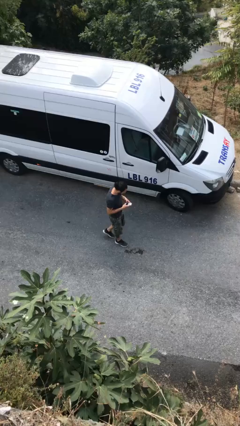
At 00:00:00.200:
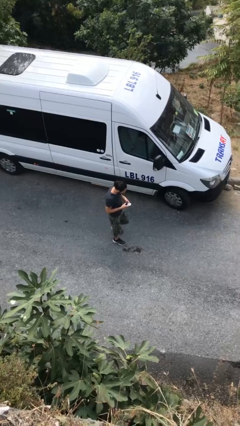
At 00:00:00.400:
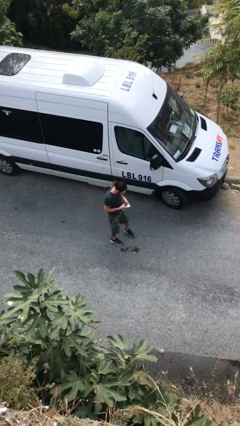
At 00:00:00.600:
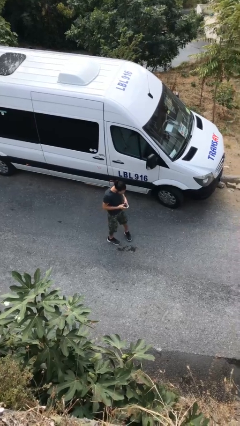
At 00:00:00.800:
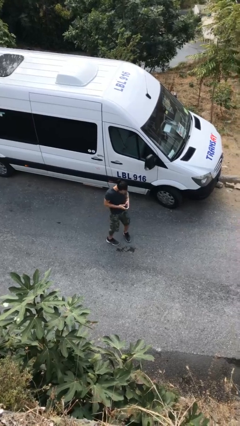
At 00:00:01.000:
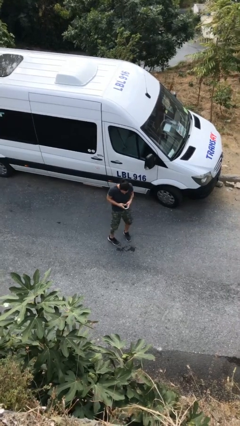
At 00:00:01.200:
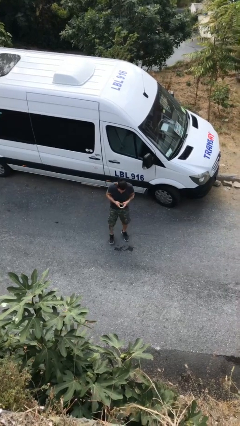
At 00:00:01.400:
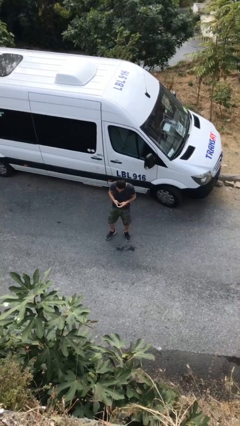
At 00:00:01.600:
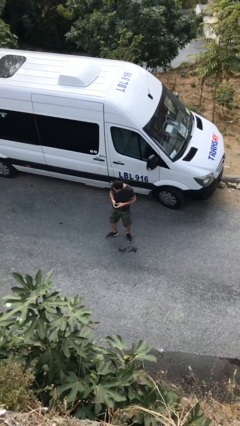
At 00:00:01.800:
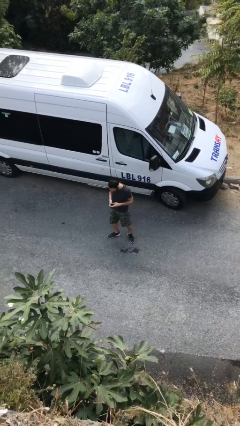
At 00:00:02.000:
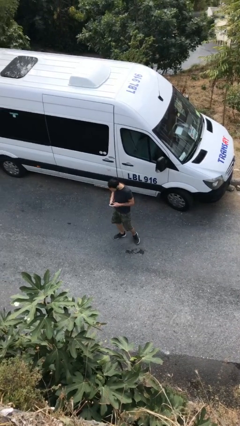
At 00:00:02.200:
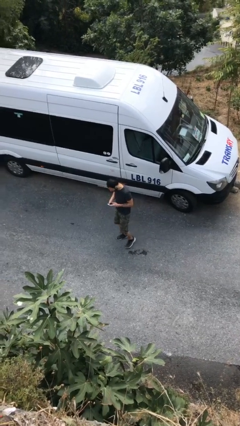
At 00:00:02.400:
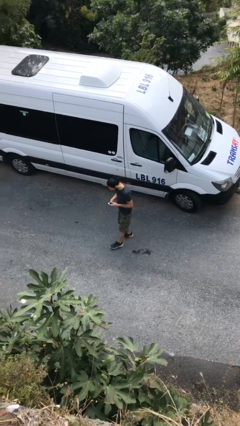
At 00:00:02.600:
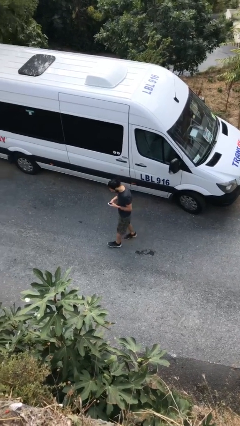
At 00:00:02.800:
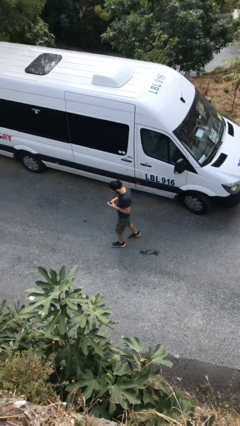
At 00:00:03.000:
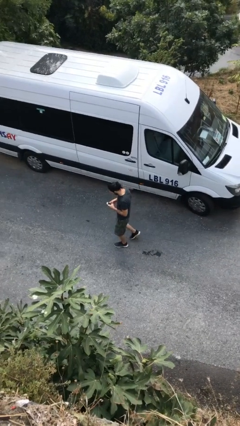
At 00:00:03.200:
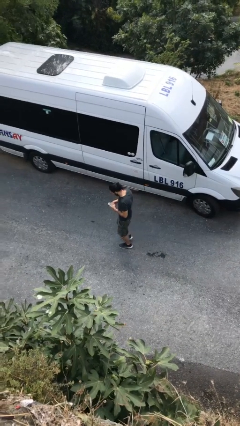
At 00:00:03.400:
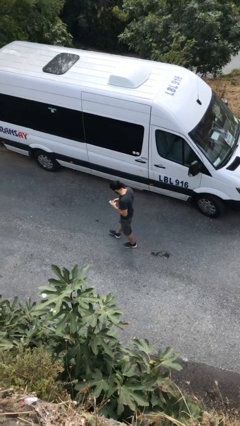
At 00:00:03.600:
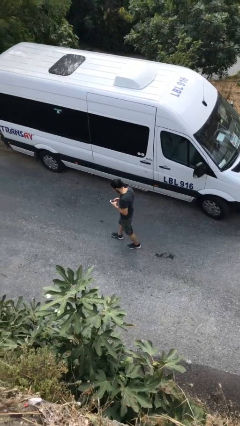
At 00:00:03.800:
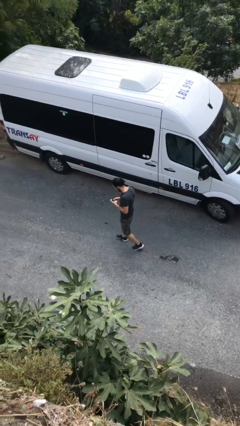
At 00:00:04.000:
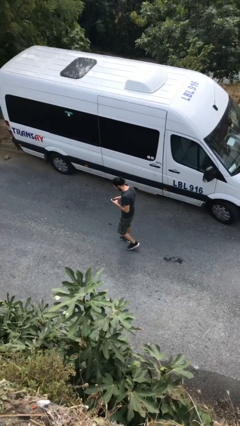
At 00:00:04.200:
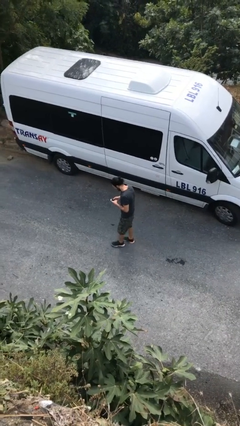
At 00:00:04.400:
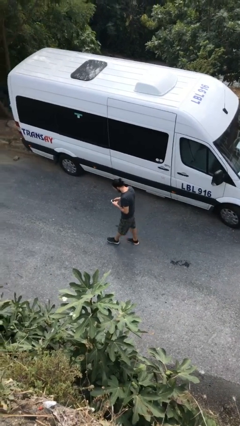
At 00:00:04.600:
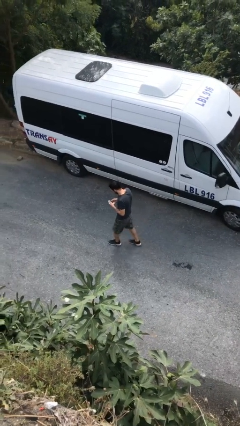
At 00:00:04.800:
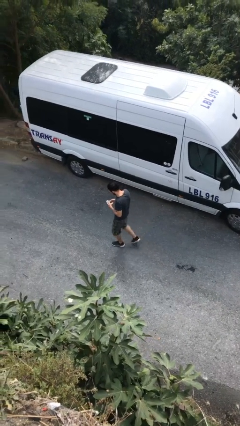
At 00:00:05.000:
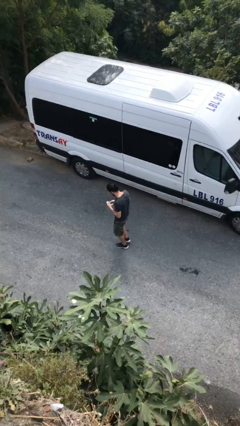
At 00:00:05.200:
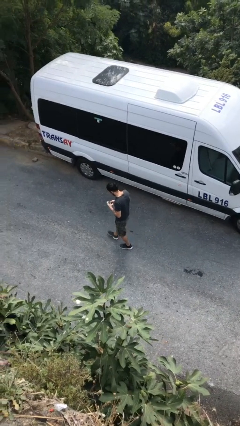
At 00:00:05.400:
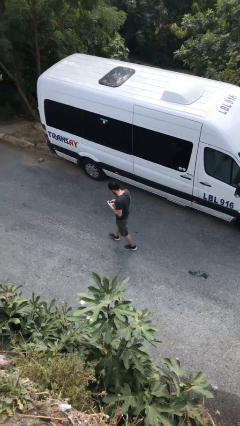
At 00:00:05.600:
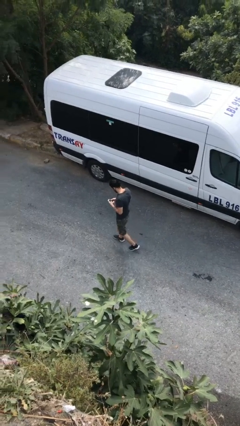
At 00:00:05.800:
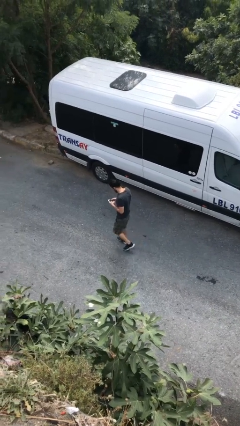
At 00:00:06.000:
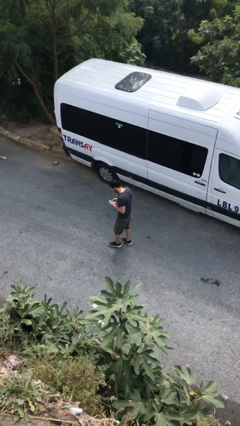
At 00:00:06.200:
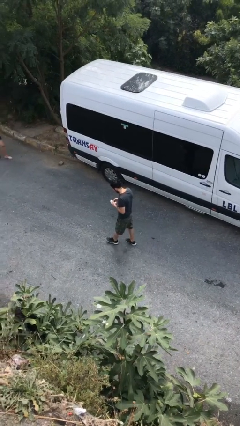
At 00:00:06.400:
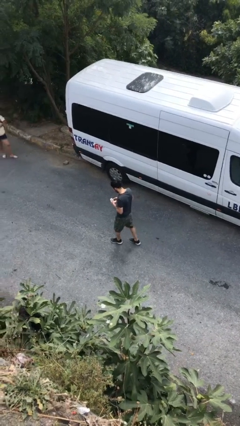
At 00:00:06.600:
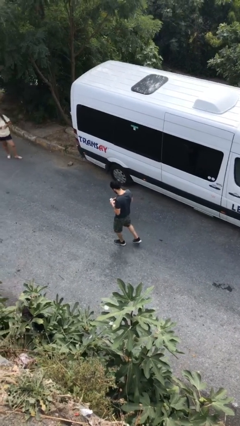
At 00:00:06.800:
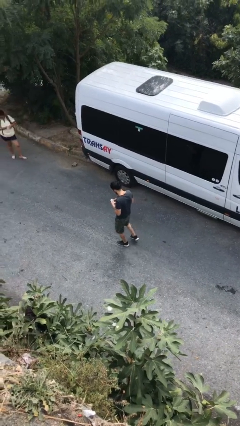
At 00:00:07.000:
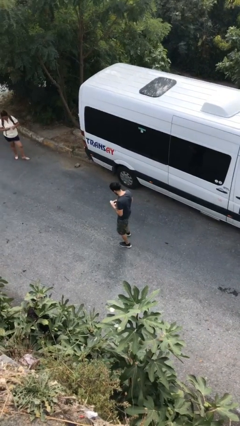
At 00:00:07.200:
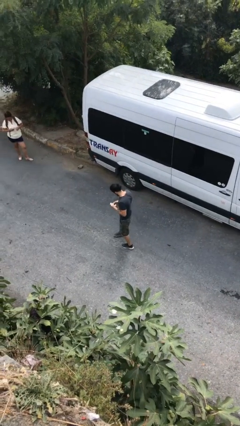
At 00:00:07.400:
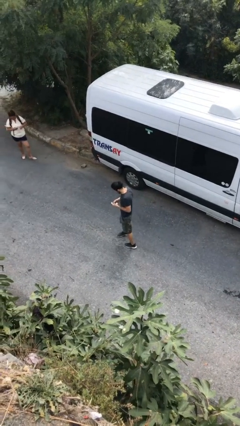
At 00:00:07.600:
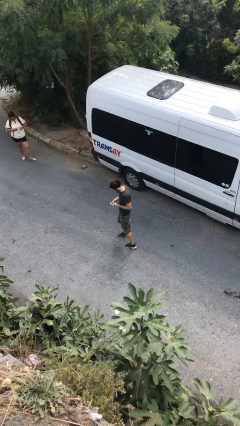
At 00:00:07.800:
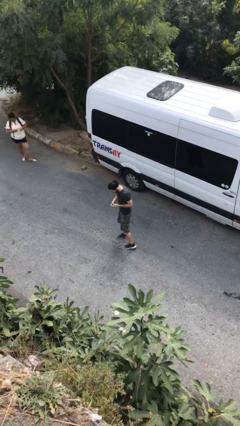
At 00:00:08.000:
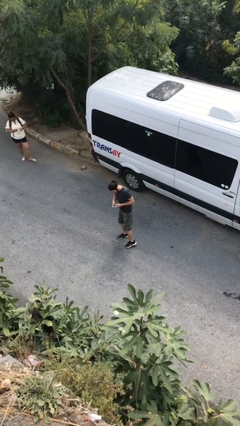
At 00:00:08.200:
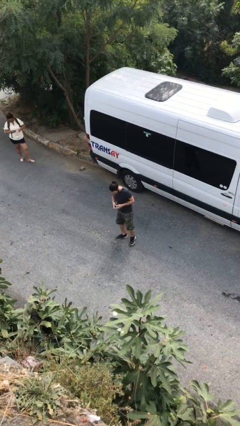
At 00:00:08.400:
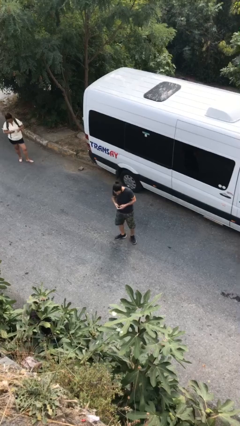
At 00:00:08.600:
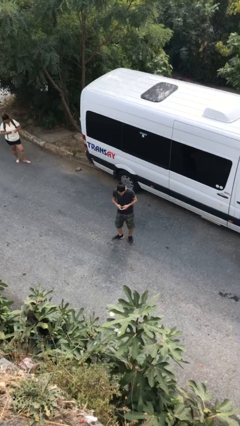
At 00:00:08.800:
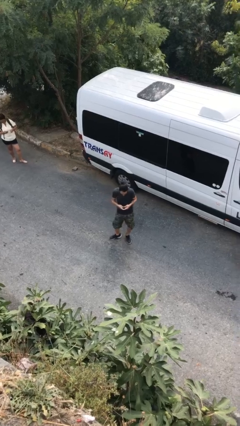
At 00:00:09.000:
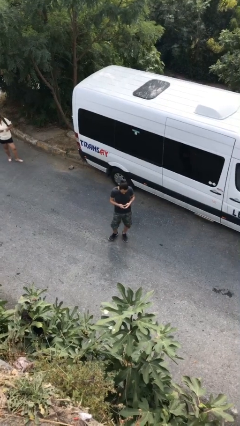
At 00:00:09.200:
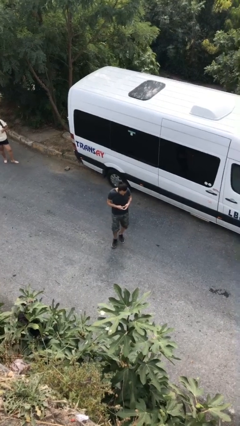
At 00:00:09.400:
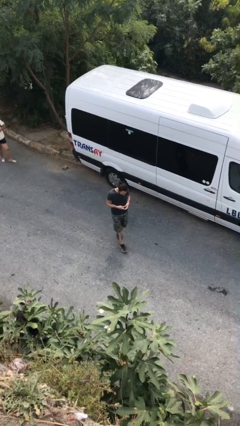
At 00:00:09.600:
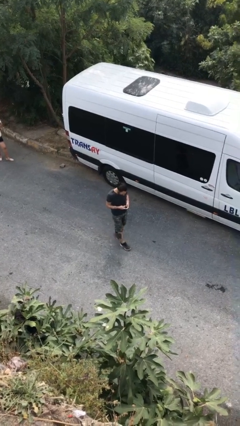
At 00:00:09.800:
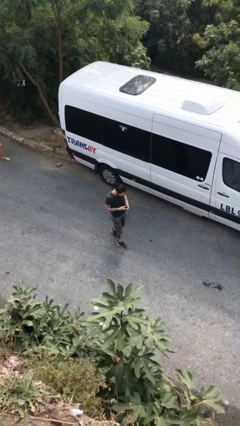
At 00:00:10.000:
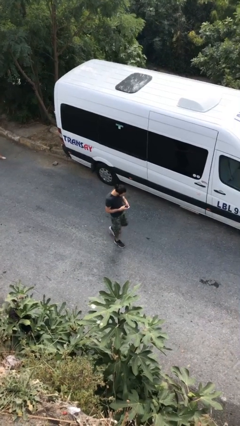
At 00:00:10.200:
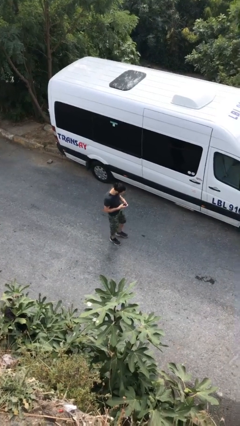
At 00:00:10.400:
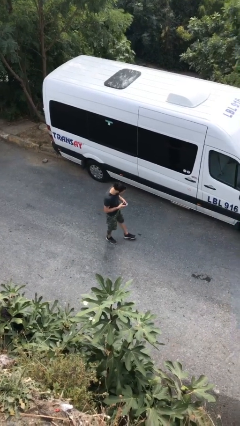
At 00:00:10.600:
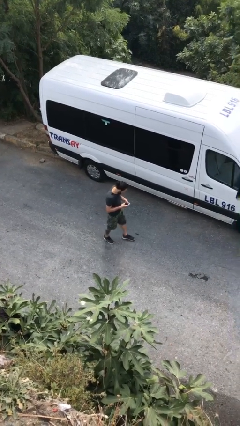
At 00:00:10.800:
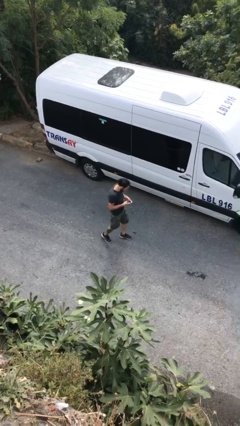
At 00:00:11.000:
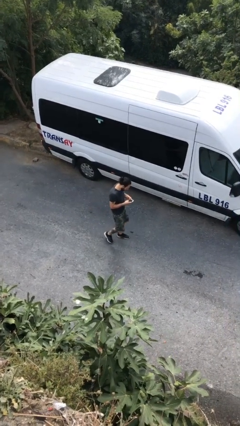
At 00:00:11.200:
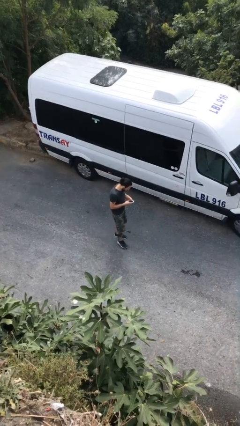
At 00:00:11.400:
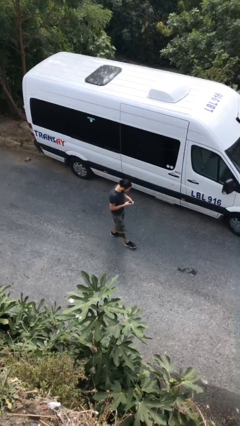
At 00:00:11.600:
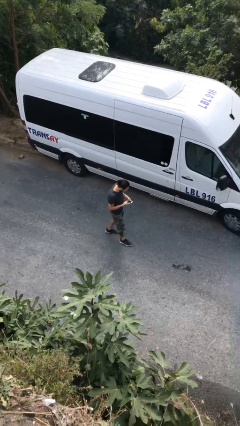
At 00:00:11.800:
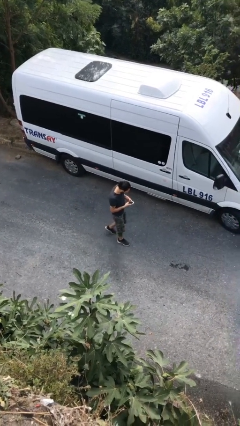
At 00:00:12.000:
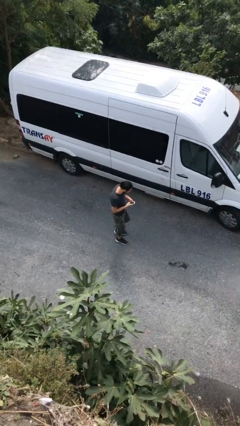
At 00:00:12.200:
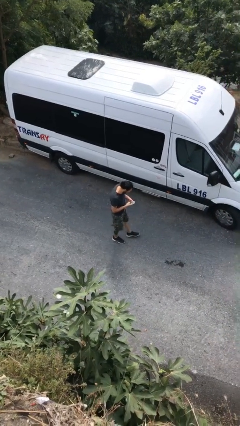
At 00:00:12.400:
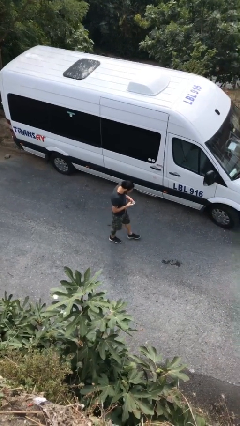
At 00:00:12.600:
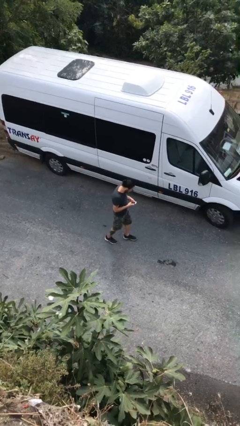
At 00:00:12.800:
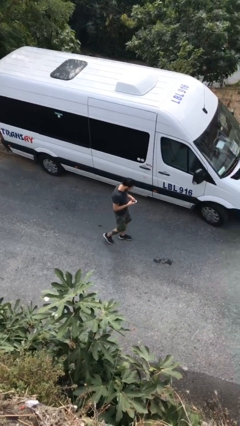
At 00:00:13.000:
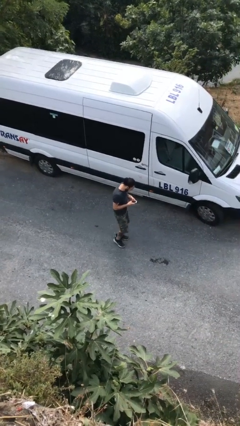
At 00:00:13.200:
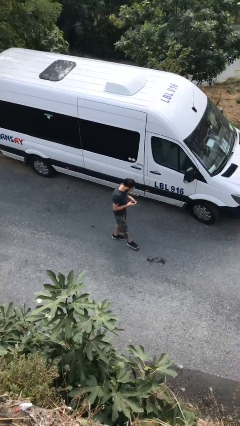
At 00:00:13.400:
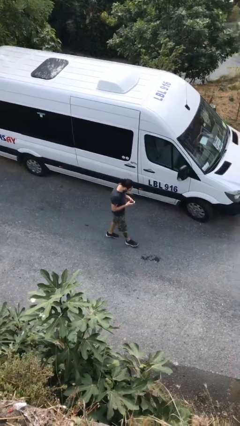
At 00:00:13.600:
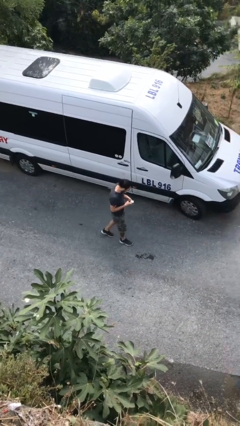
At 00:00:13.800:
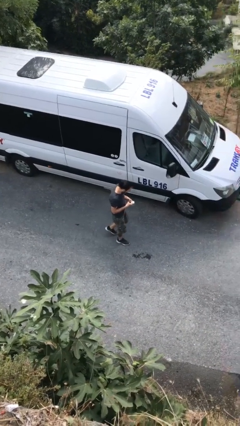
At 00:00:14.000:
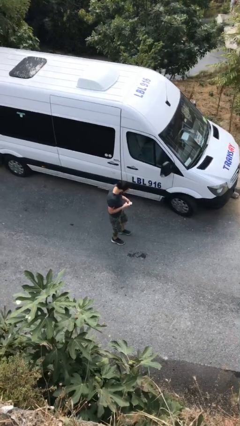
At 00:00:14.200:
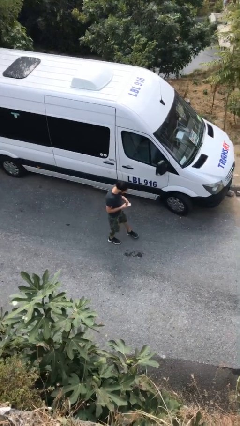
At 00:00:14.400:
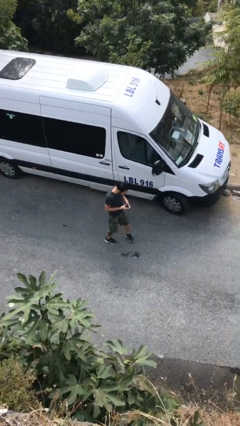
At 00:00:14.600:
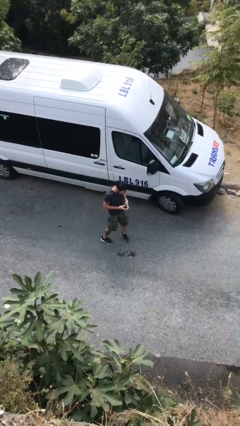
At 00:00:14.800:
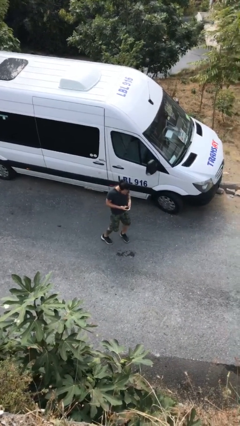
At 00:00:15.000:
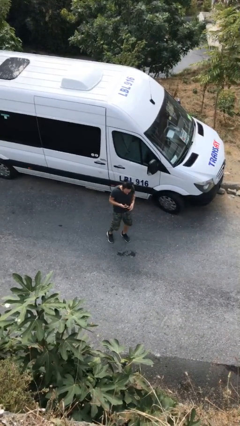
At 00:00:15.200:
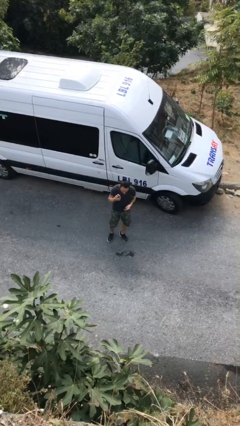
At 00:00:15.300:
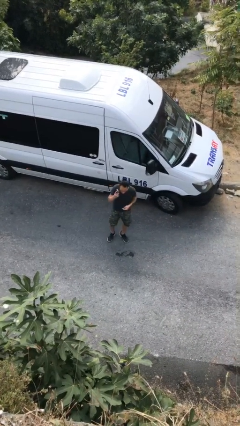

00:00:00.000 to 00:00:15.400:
person texts on phone

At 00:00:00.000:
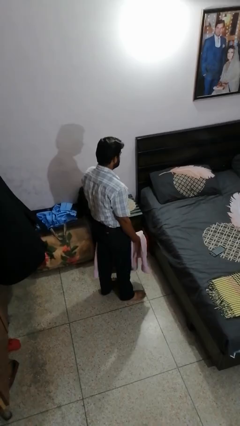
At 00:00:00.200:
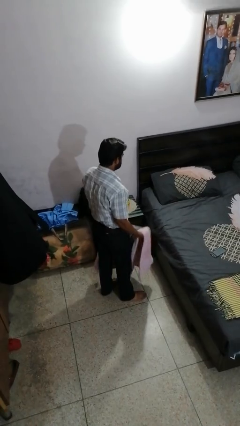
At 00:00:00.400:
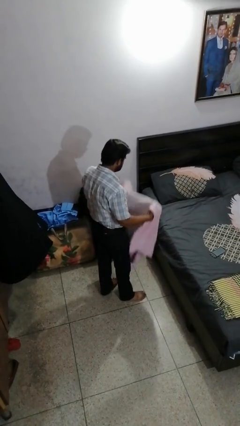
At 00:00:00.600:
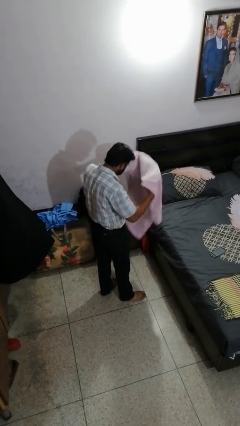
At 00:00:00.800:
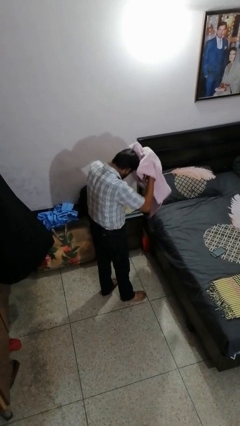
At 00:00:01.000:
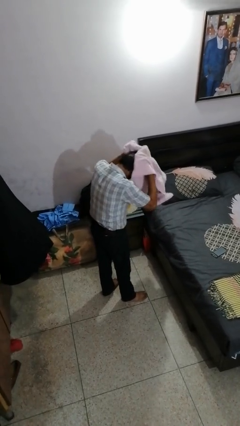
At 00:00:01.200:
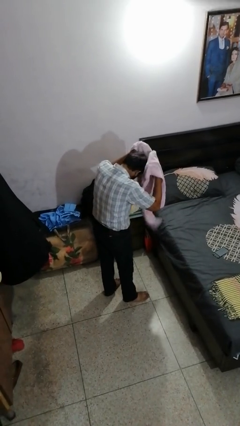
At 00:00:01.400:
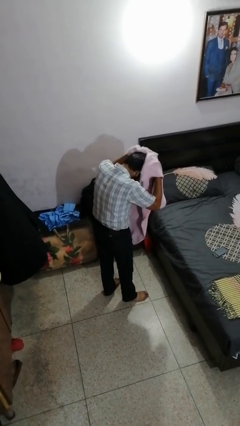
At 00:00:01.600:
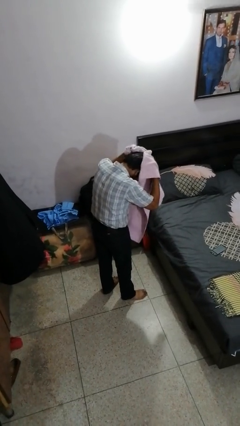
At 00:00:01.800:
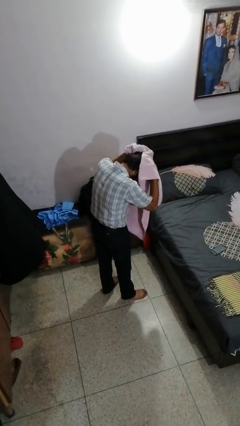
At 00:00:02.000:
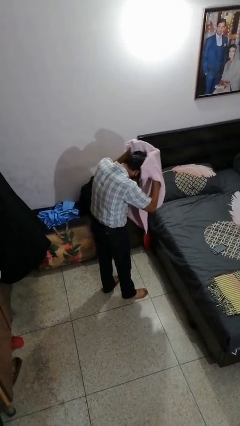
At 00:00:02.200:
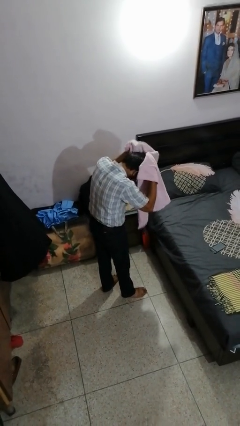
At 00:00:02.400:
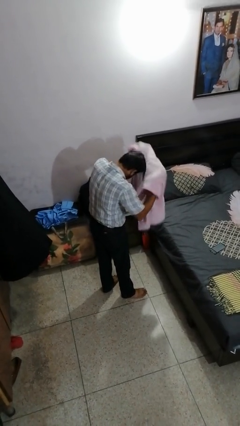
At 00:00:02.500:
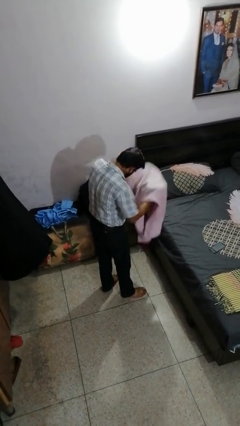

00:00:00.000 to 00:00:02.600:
person dries hair with towel
